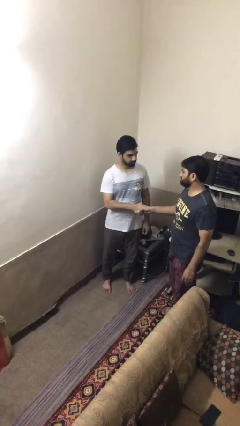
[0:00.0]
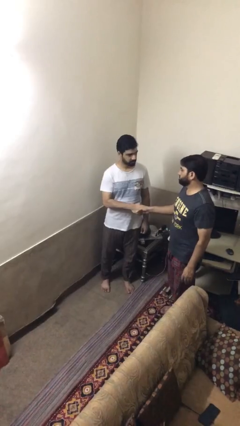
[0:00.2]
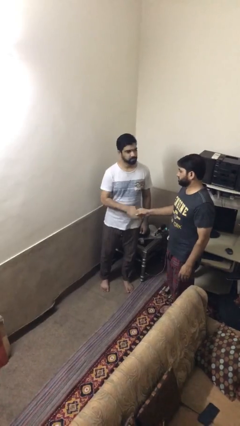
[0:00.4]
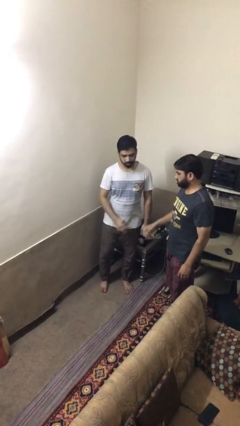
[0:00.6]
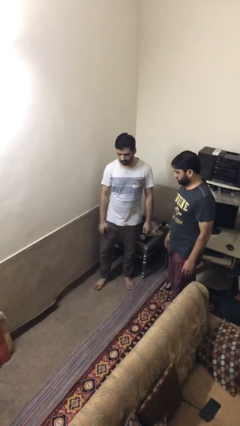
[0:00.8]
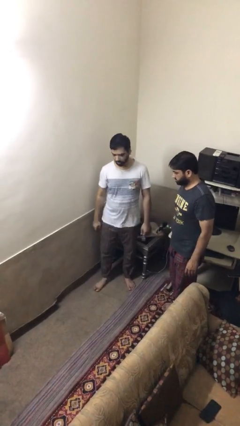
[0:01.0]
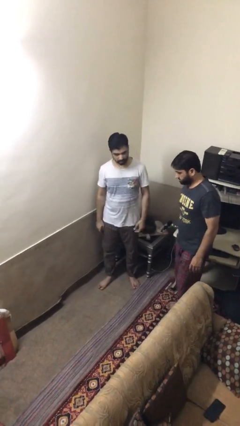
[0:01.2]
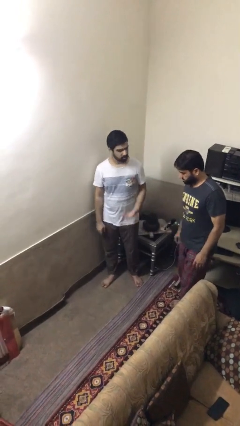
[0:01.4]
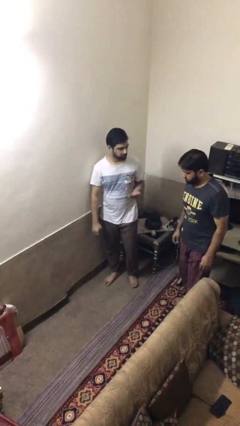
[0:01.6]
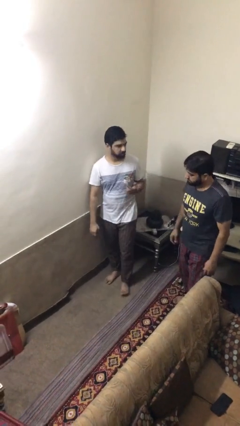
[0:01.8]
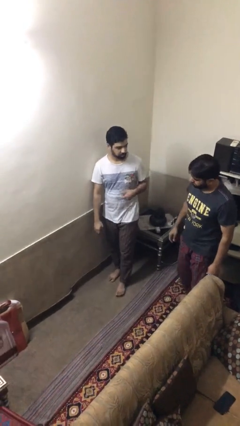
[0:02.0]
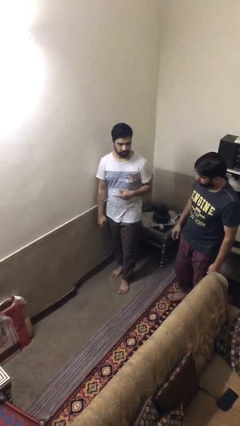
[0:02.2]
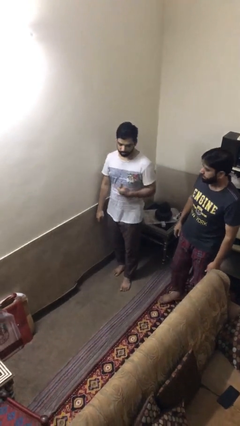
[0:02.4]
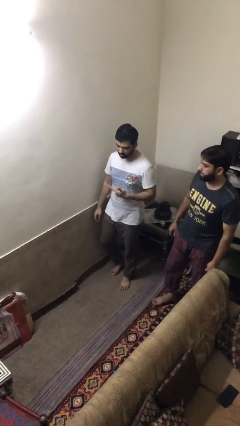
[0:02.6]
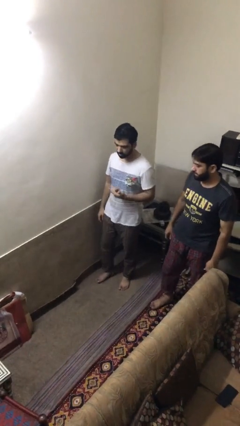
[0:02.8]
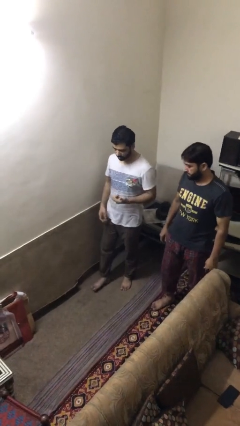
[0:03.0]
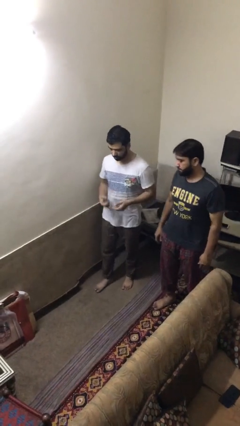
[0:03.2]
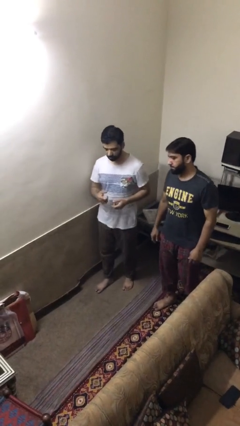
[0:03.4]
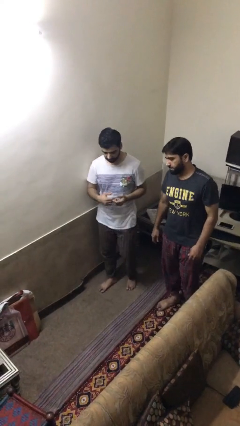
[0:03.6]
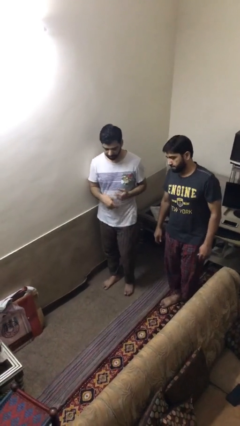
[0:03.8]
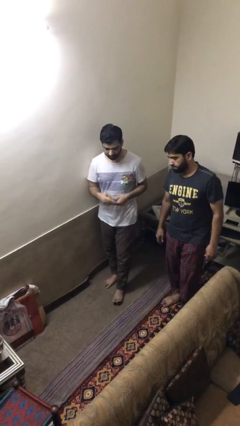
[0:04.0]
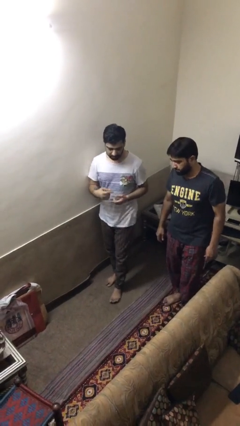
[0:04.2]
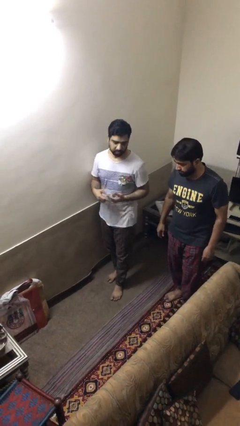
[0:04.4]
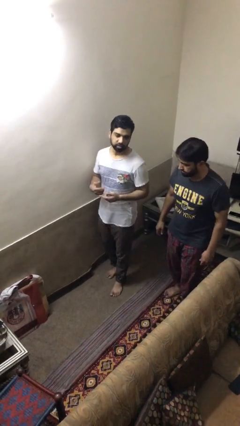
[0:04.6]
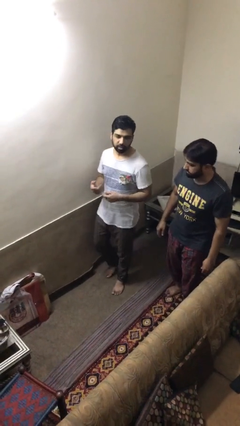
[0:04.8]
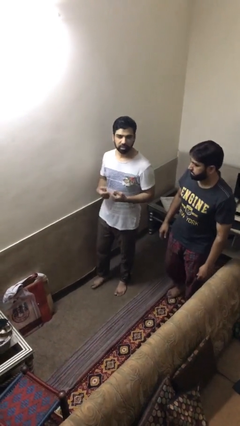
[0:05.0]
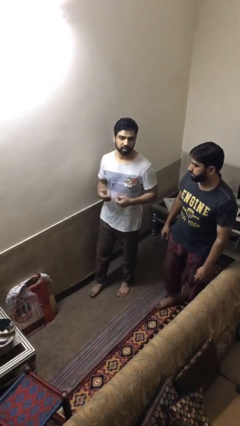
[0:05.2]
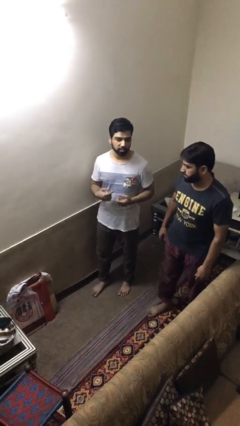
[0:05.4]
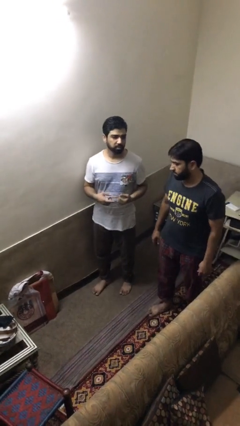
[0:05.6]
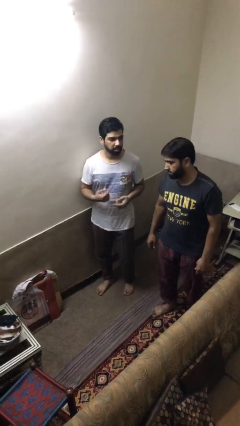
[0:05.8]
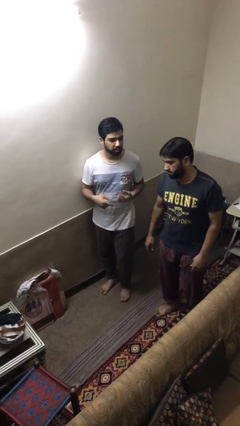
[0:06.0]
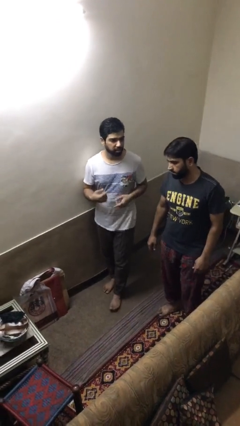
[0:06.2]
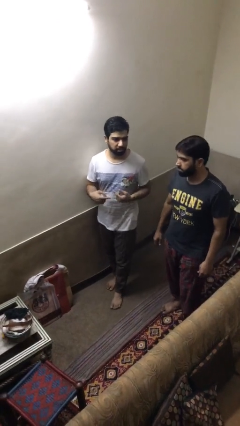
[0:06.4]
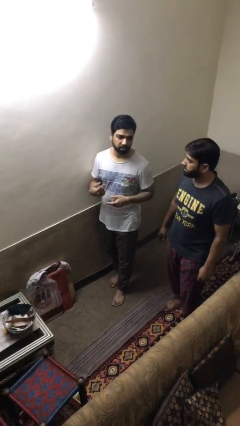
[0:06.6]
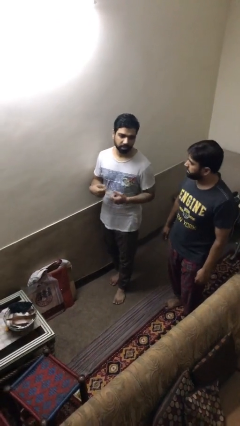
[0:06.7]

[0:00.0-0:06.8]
person talks to person

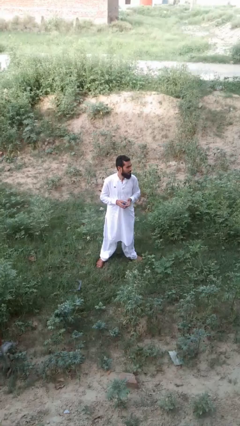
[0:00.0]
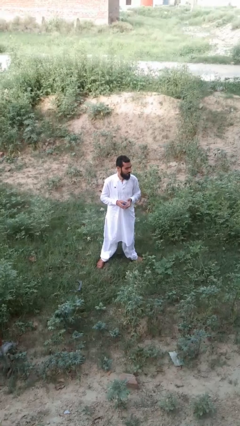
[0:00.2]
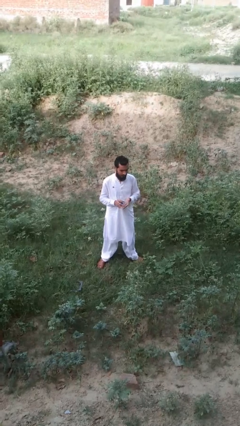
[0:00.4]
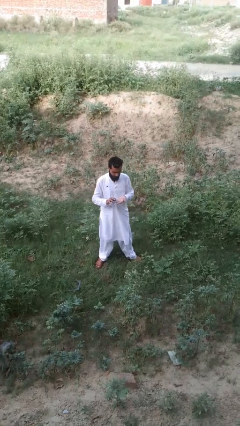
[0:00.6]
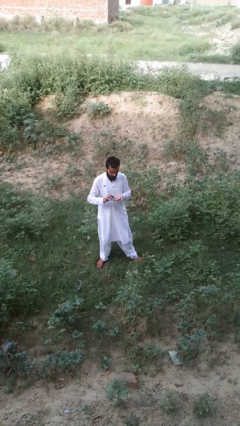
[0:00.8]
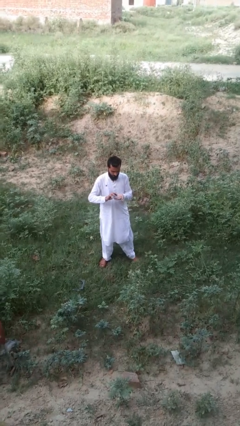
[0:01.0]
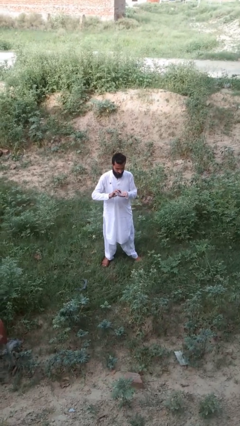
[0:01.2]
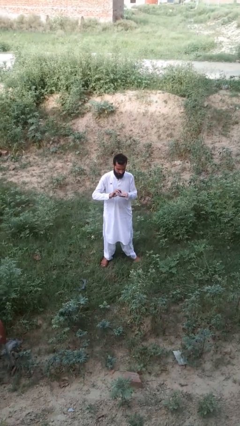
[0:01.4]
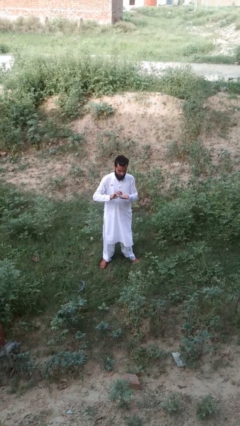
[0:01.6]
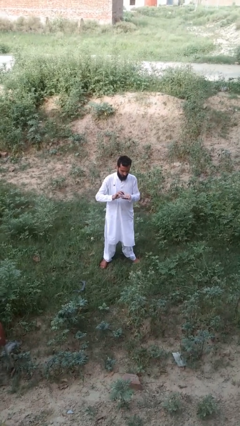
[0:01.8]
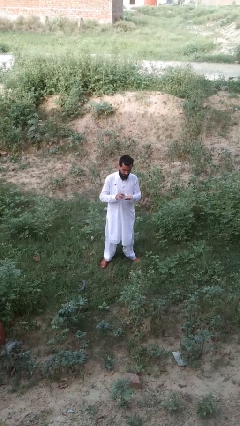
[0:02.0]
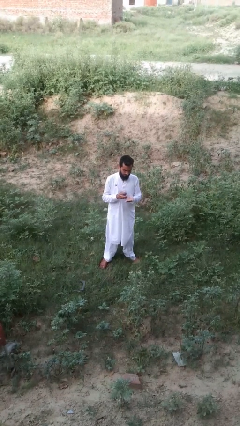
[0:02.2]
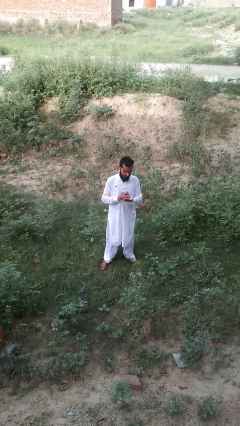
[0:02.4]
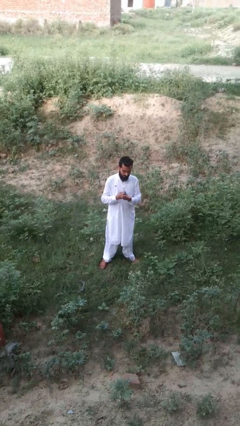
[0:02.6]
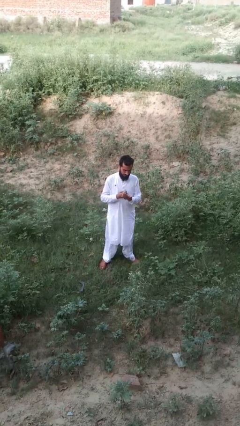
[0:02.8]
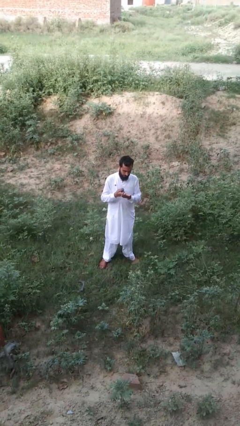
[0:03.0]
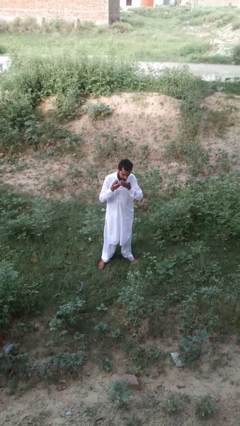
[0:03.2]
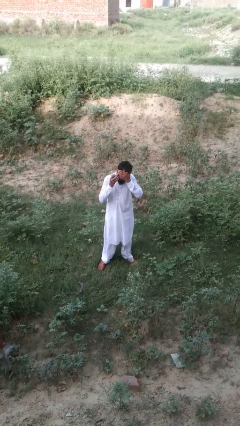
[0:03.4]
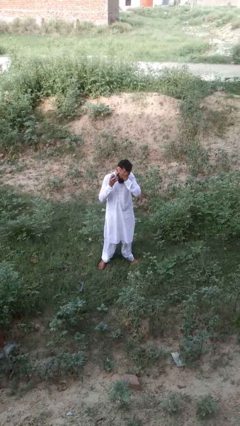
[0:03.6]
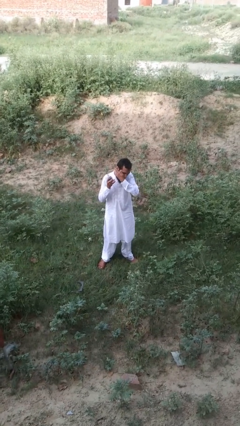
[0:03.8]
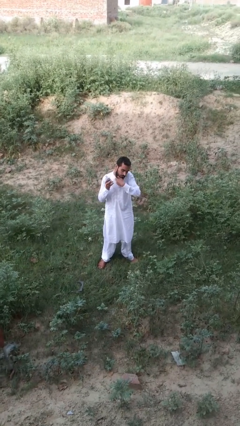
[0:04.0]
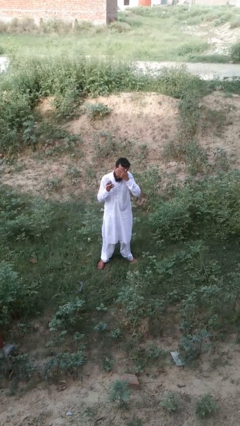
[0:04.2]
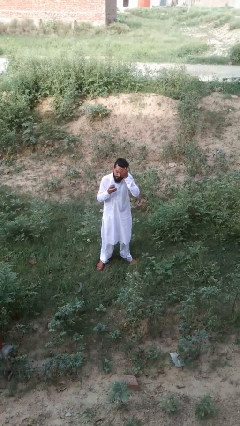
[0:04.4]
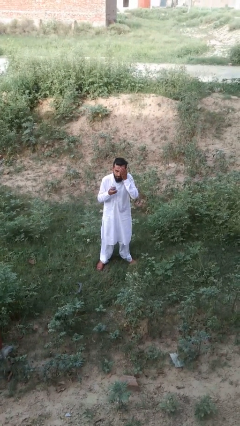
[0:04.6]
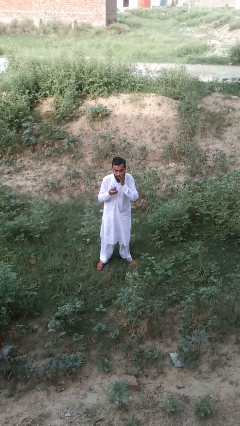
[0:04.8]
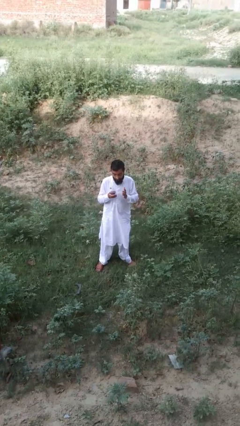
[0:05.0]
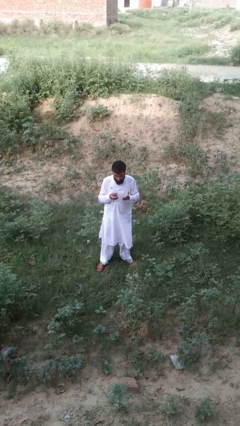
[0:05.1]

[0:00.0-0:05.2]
person applies sunscreen

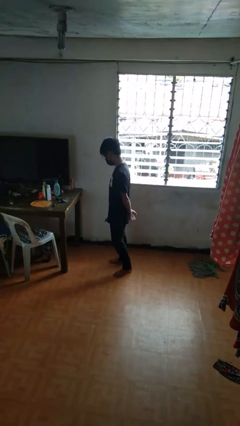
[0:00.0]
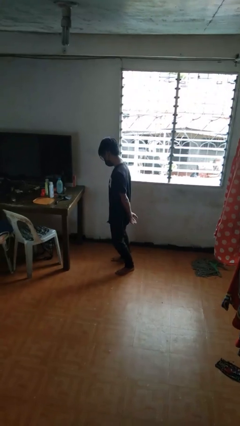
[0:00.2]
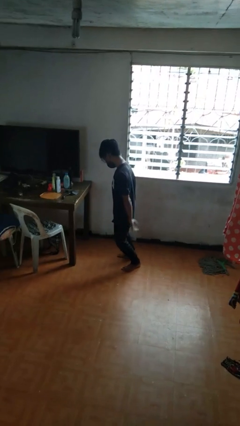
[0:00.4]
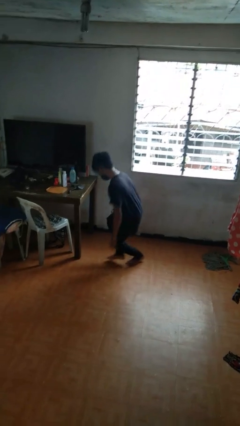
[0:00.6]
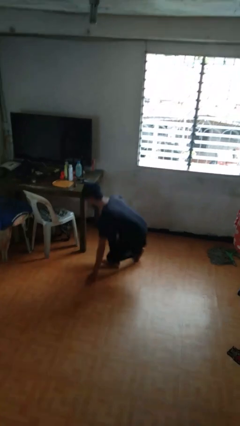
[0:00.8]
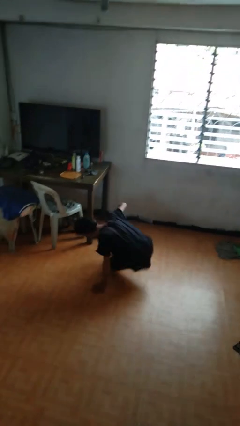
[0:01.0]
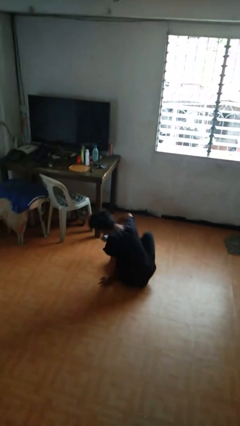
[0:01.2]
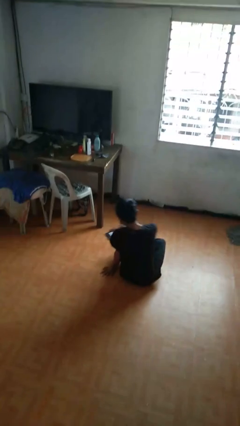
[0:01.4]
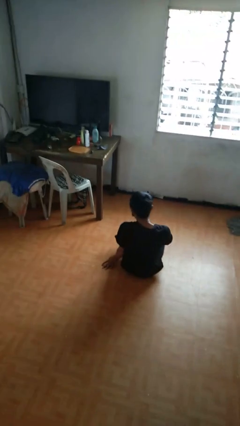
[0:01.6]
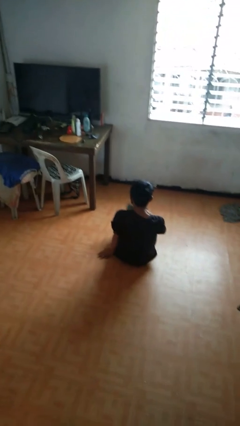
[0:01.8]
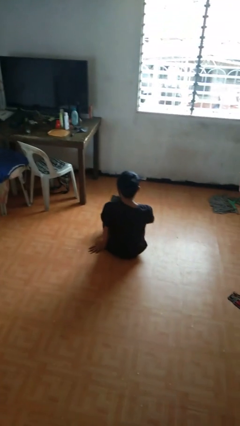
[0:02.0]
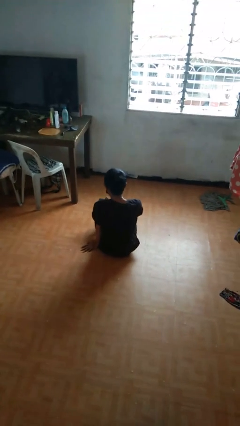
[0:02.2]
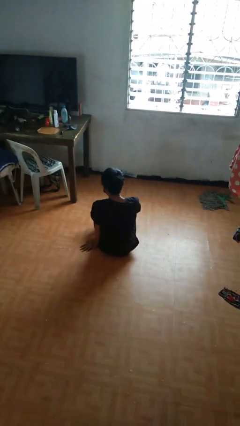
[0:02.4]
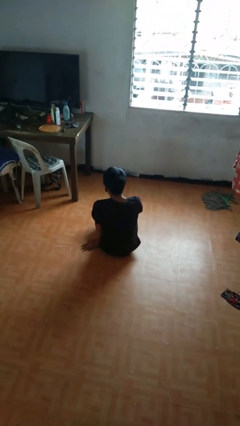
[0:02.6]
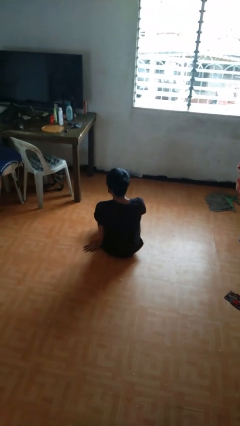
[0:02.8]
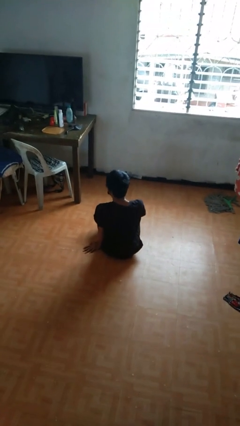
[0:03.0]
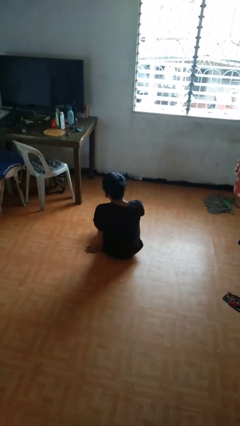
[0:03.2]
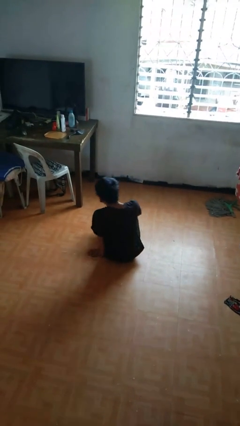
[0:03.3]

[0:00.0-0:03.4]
person falls while standing

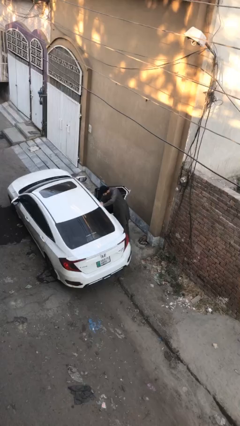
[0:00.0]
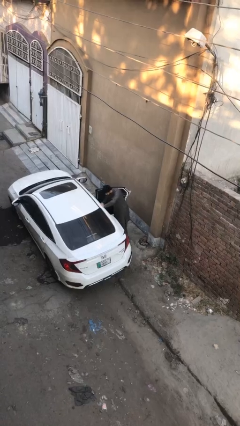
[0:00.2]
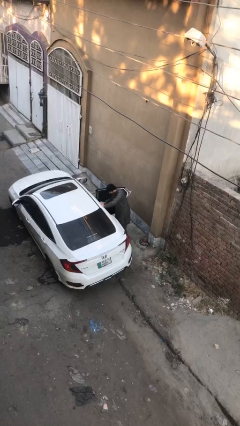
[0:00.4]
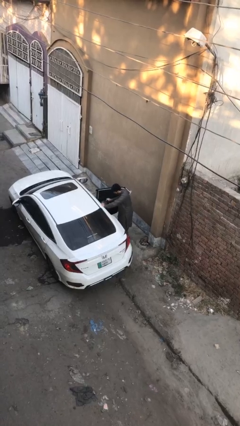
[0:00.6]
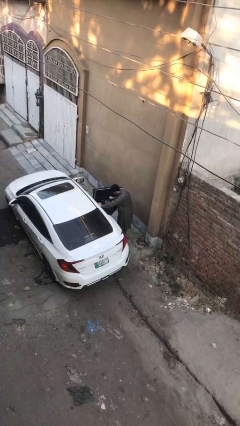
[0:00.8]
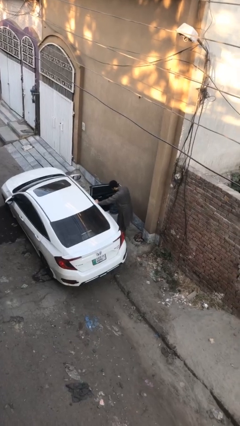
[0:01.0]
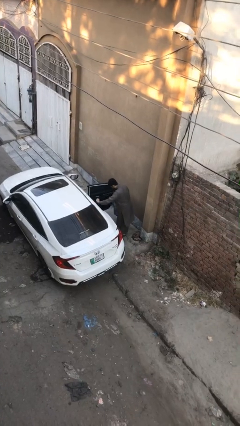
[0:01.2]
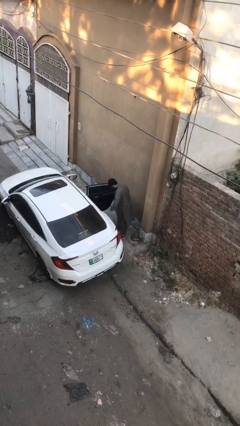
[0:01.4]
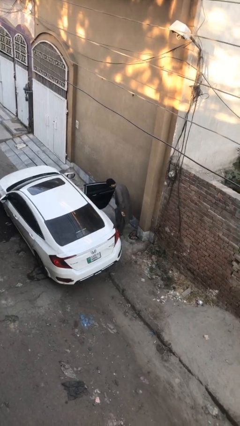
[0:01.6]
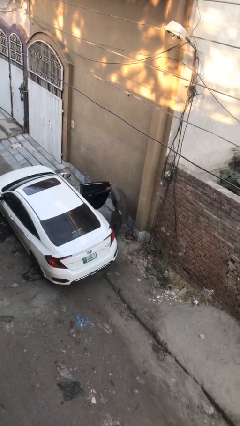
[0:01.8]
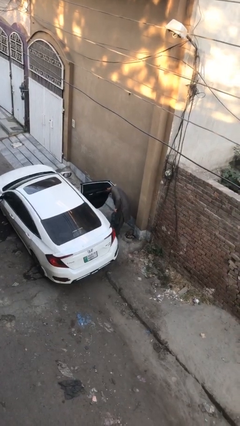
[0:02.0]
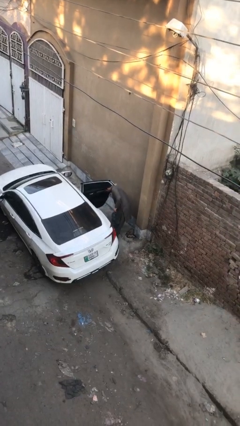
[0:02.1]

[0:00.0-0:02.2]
person unloads car

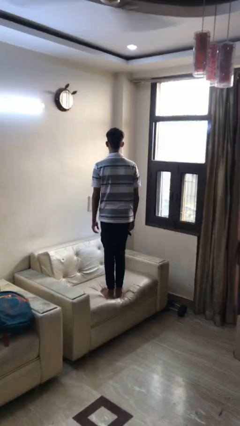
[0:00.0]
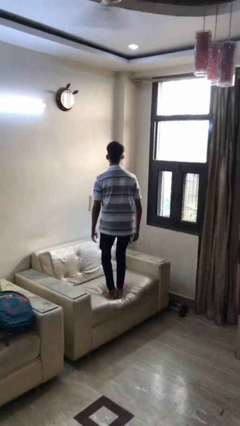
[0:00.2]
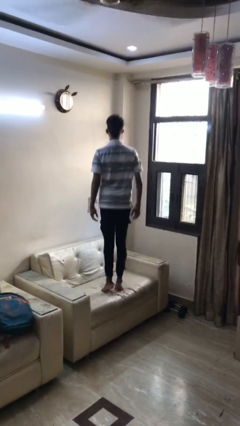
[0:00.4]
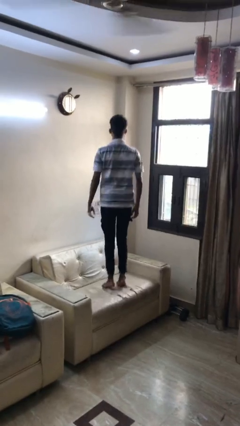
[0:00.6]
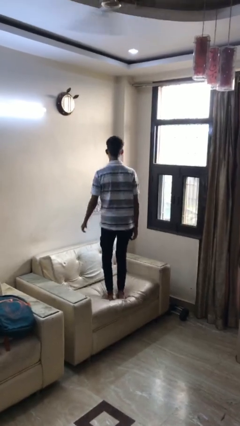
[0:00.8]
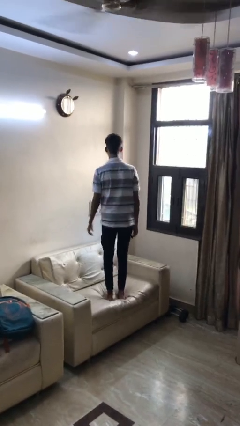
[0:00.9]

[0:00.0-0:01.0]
person jumps on couch
